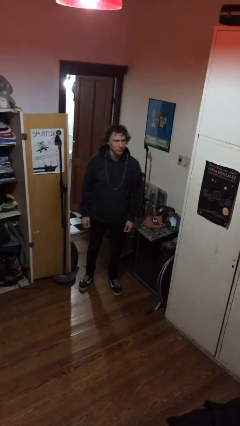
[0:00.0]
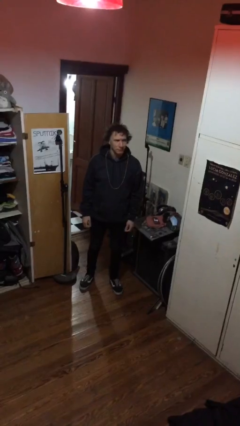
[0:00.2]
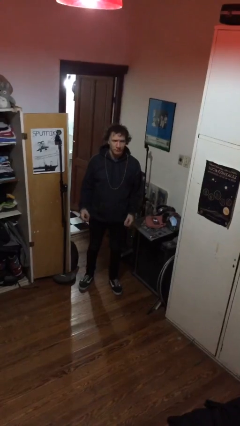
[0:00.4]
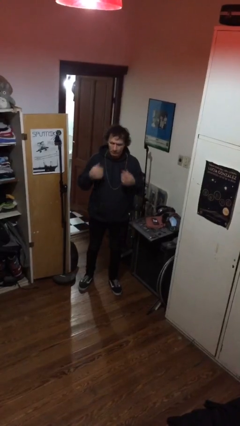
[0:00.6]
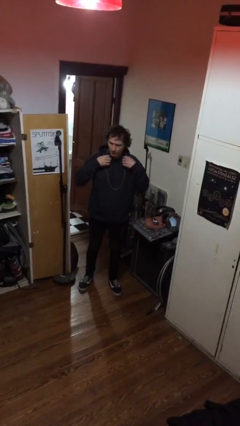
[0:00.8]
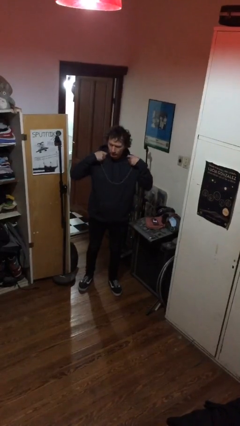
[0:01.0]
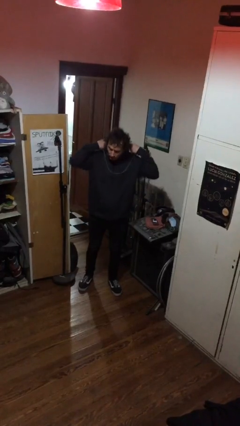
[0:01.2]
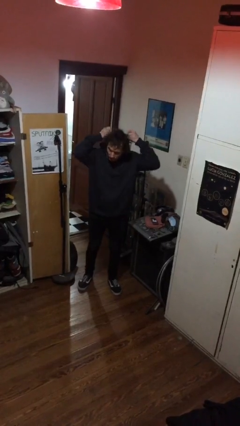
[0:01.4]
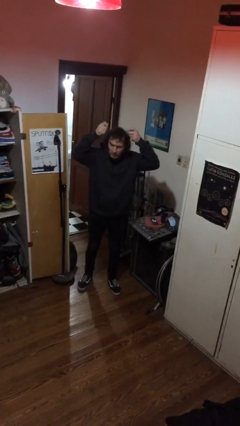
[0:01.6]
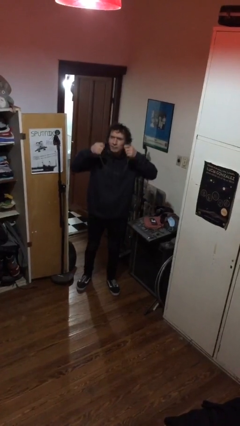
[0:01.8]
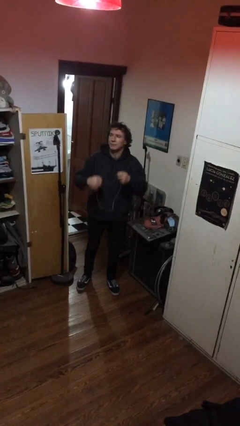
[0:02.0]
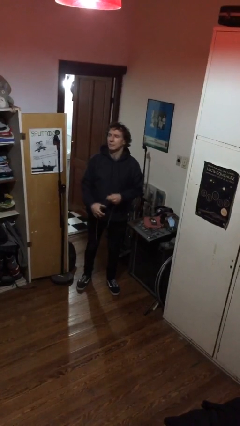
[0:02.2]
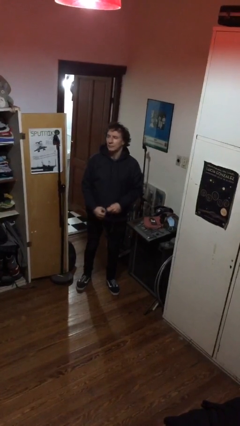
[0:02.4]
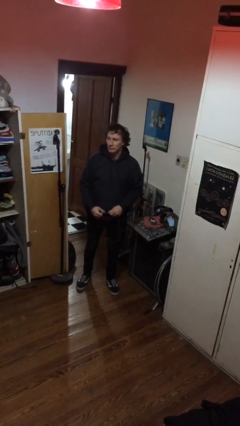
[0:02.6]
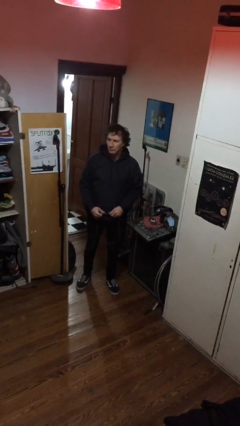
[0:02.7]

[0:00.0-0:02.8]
person takes off necklace

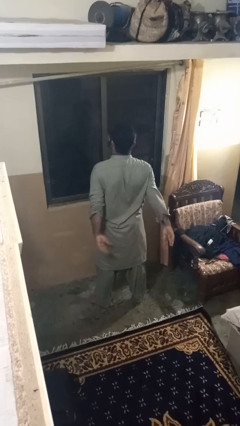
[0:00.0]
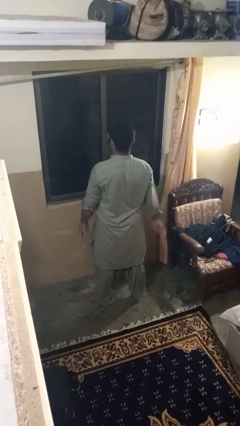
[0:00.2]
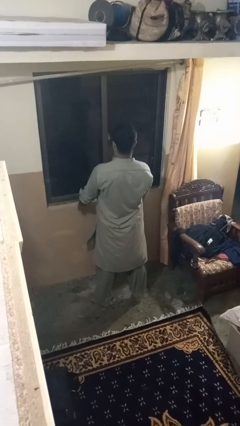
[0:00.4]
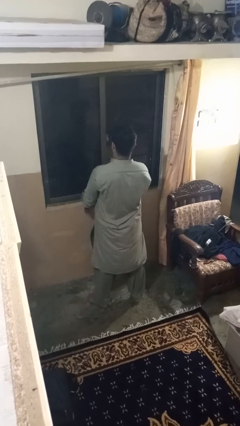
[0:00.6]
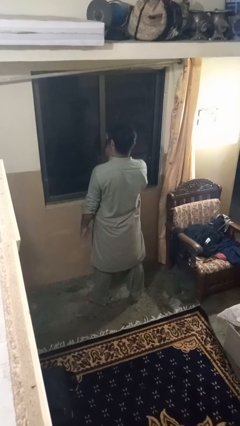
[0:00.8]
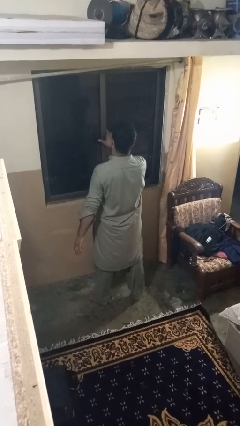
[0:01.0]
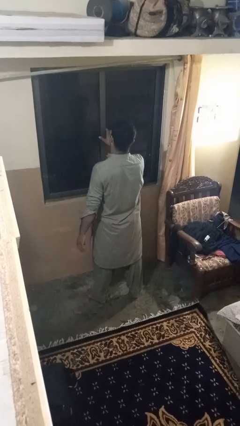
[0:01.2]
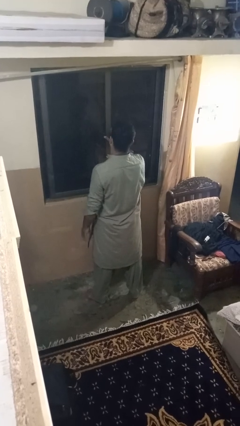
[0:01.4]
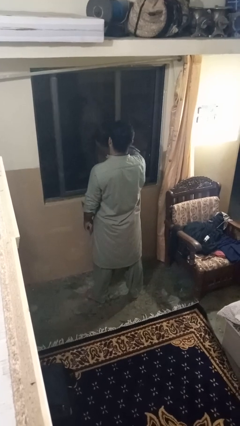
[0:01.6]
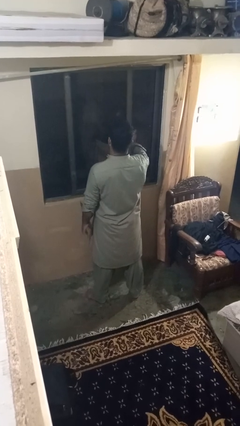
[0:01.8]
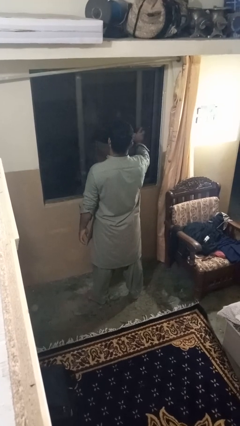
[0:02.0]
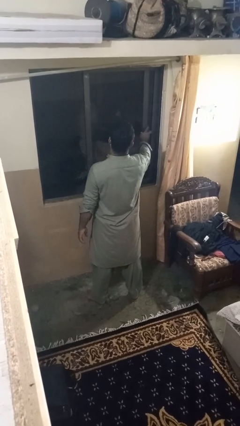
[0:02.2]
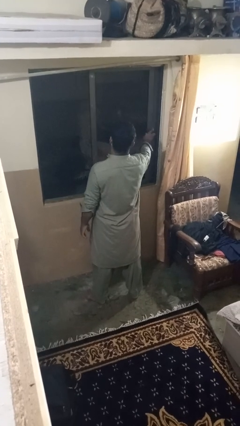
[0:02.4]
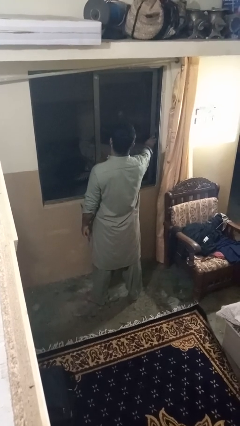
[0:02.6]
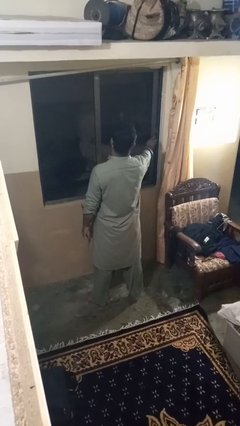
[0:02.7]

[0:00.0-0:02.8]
person opens home window

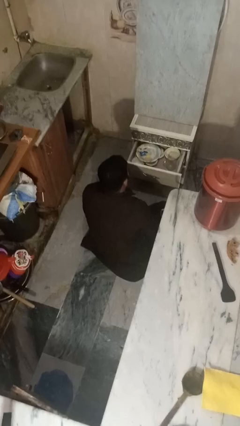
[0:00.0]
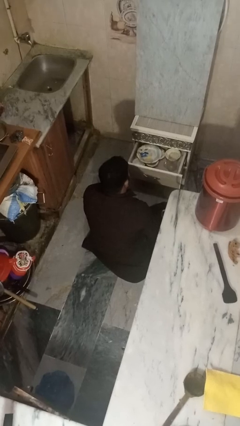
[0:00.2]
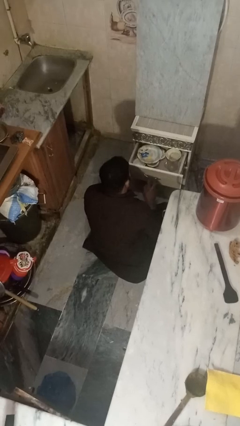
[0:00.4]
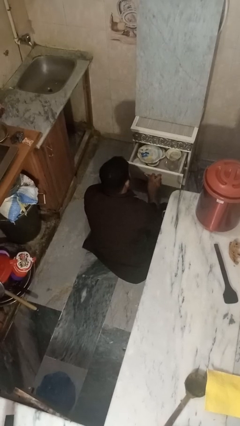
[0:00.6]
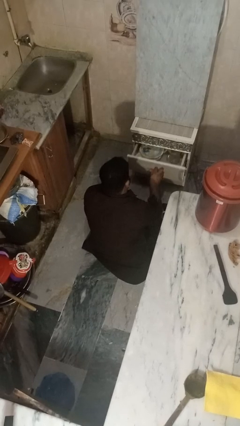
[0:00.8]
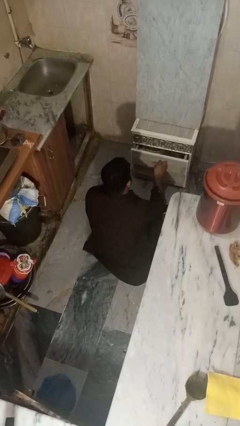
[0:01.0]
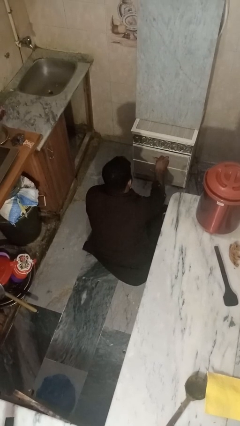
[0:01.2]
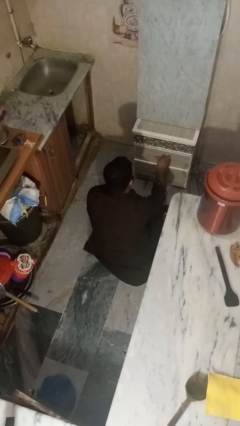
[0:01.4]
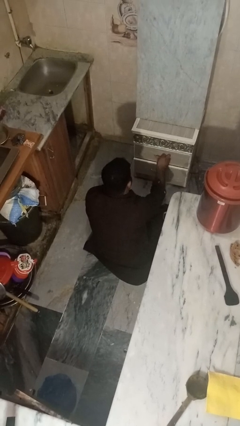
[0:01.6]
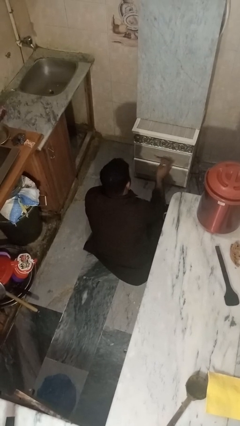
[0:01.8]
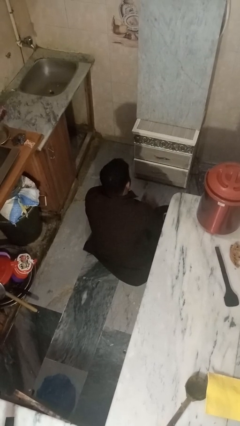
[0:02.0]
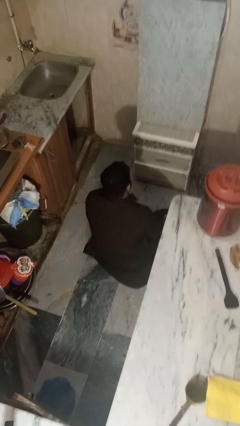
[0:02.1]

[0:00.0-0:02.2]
person closes kitchen drawer

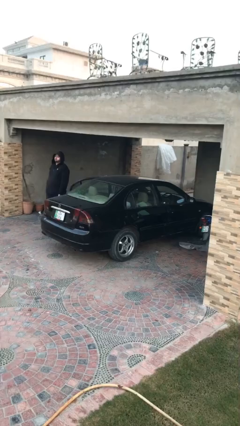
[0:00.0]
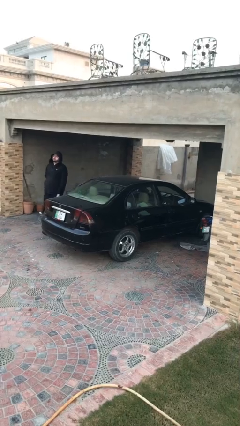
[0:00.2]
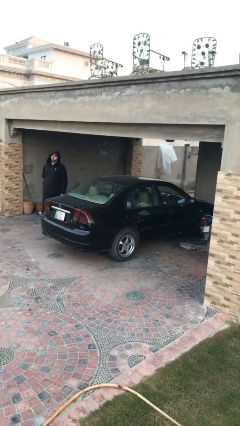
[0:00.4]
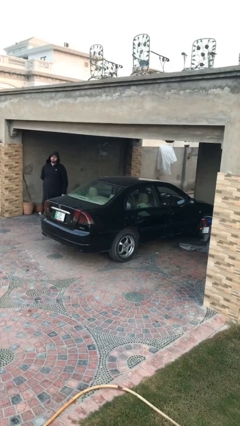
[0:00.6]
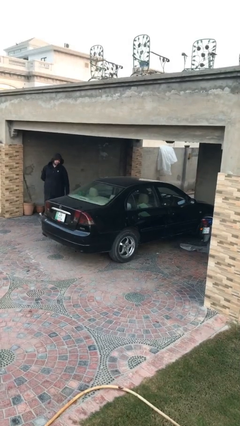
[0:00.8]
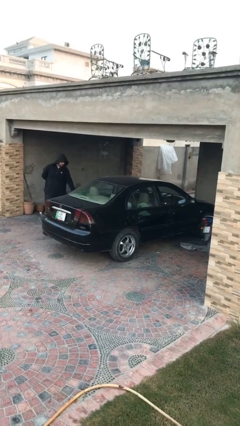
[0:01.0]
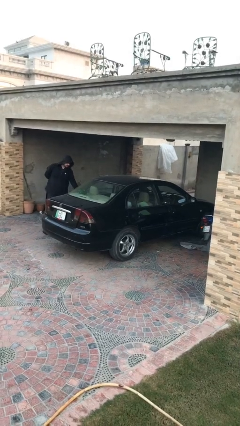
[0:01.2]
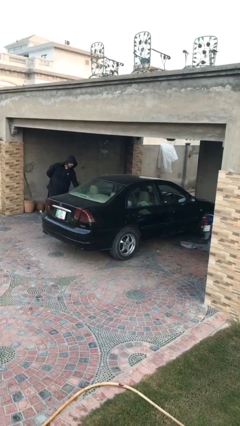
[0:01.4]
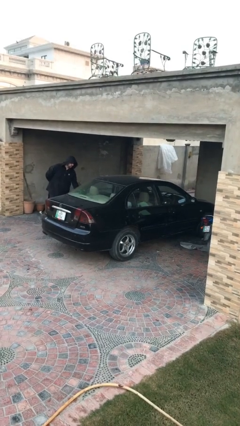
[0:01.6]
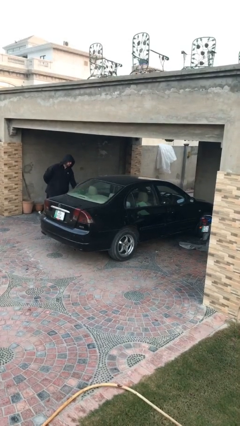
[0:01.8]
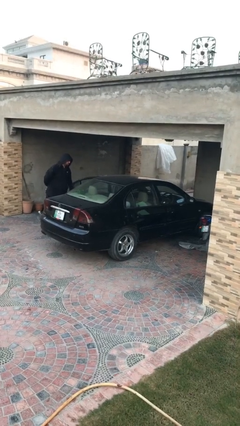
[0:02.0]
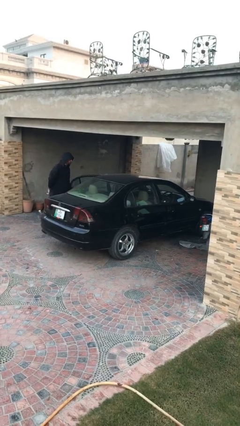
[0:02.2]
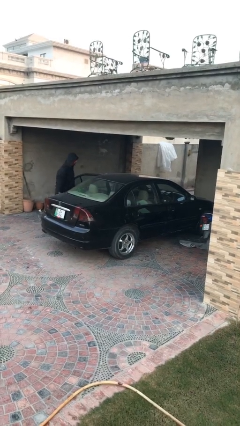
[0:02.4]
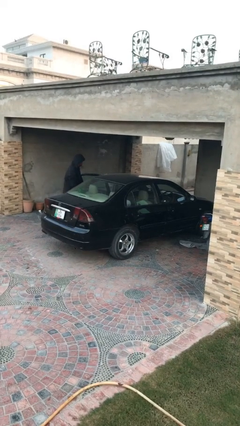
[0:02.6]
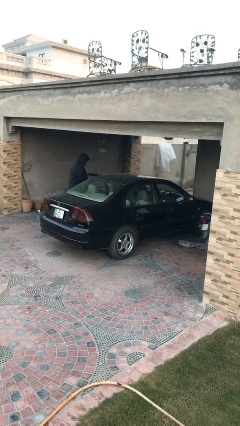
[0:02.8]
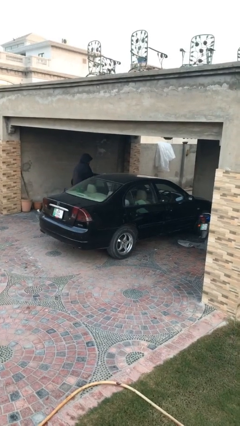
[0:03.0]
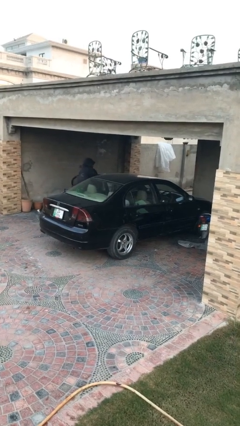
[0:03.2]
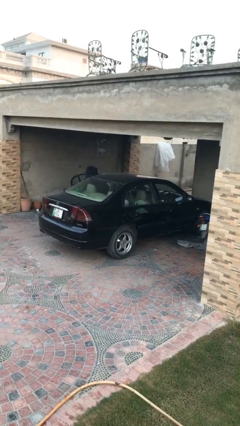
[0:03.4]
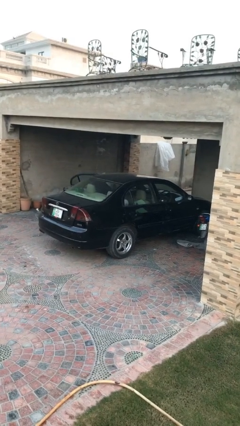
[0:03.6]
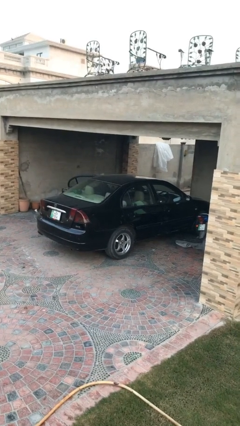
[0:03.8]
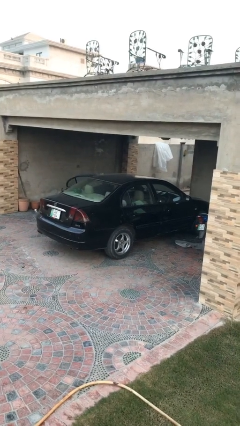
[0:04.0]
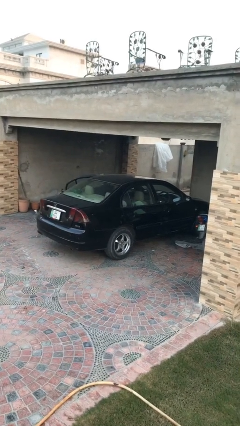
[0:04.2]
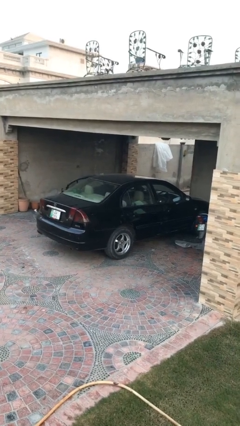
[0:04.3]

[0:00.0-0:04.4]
car picks up person

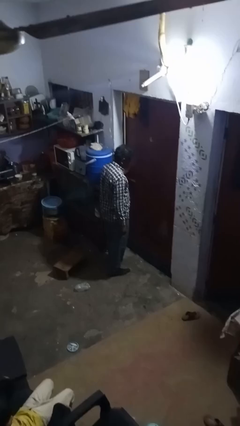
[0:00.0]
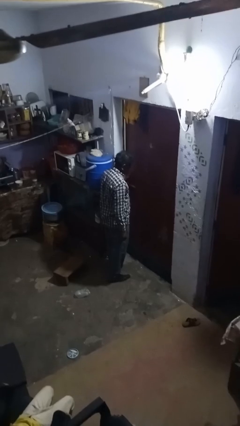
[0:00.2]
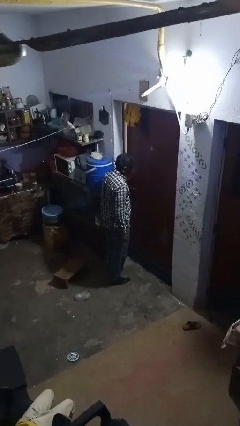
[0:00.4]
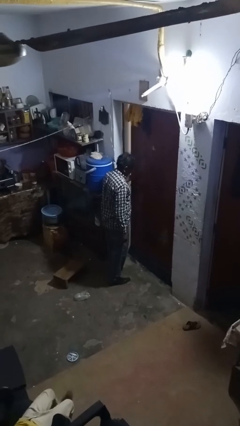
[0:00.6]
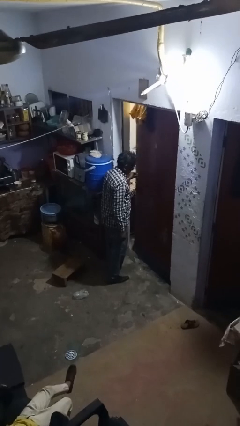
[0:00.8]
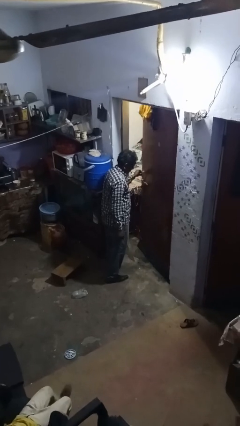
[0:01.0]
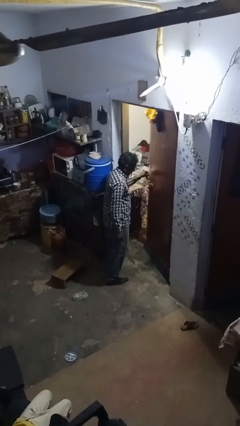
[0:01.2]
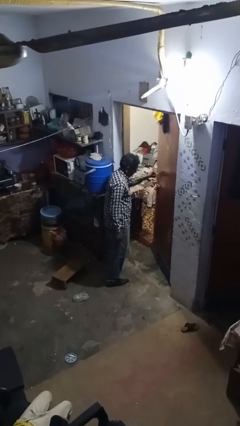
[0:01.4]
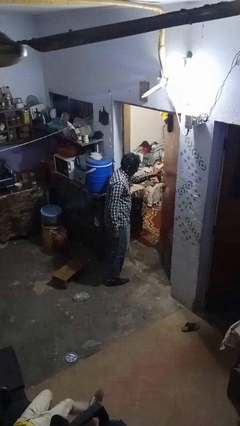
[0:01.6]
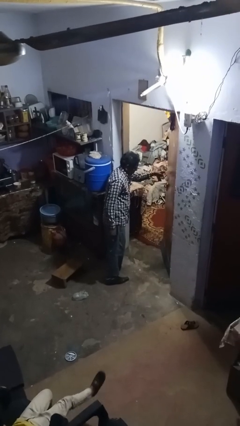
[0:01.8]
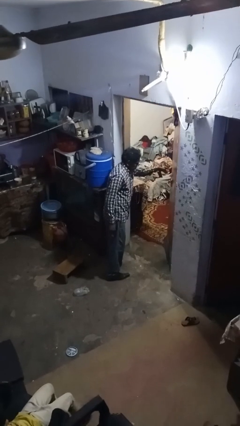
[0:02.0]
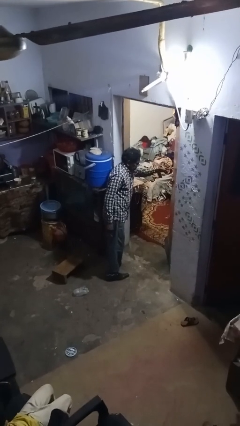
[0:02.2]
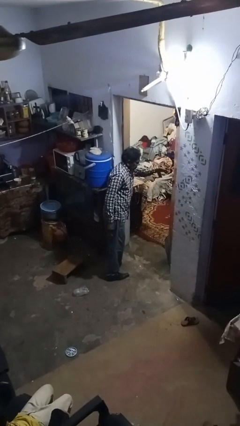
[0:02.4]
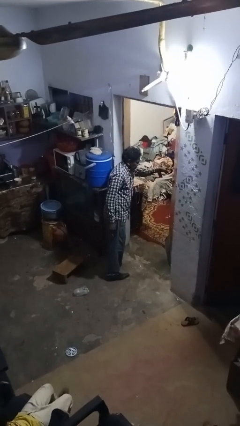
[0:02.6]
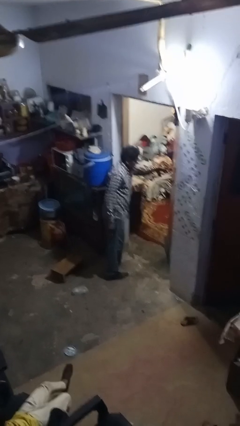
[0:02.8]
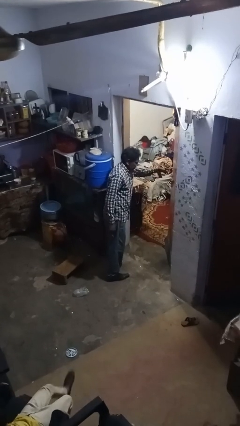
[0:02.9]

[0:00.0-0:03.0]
person opens facility door

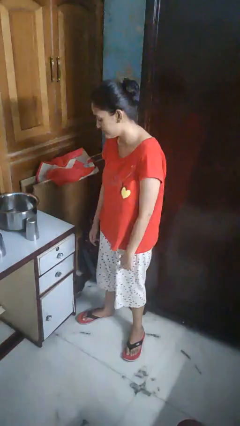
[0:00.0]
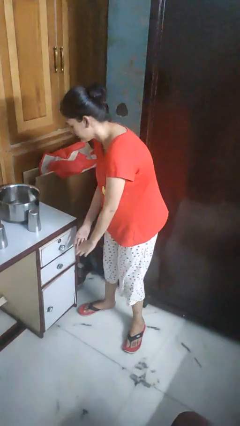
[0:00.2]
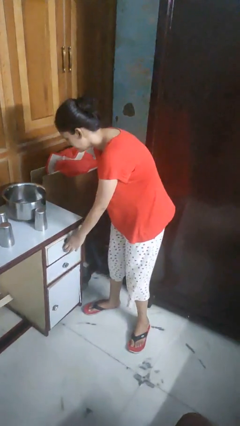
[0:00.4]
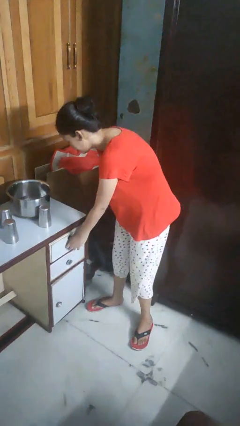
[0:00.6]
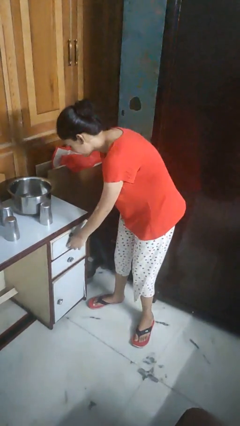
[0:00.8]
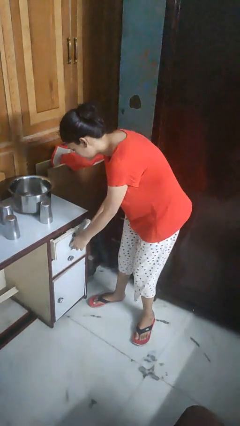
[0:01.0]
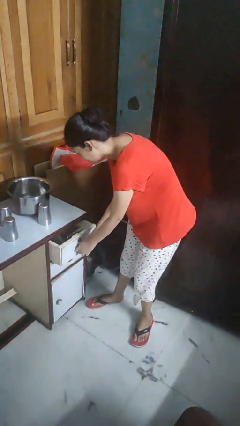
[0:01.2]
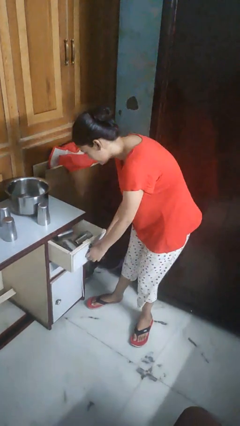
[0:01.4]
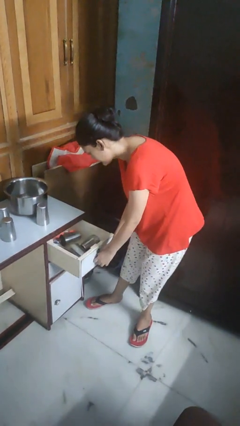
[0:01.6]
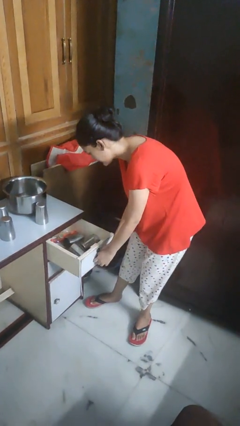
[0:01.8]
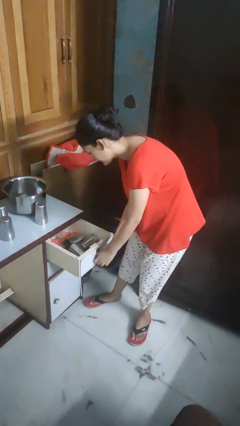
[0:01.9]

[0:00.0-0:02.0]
person opens kitchen drawer

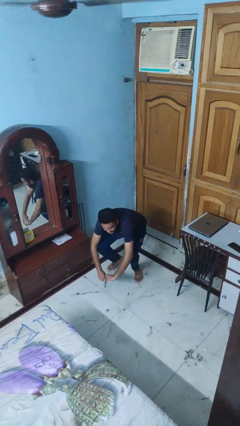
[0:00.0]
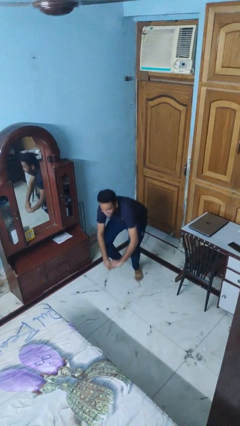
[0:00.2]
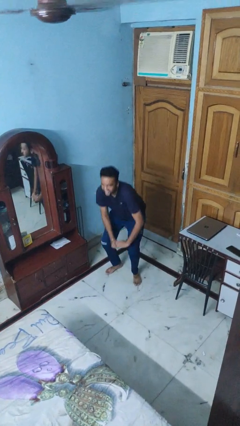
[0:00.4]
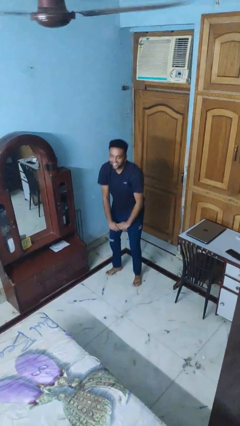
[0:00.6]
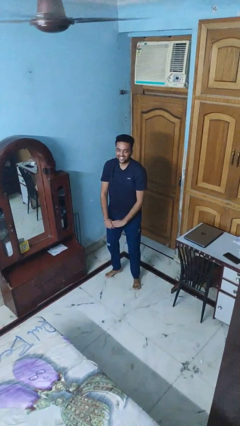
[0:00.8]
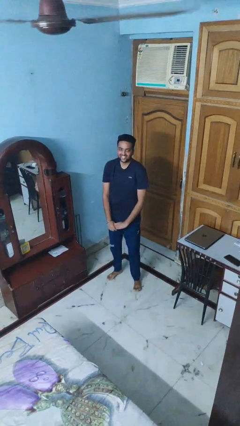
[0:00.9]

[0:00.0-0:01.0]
person stands up
